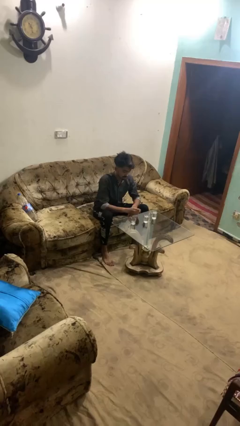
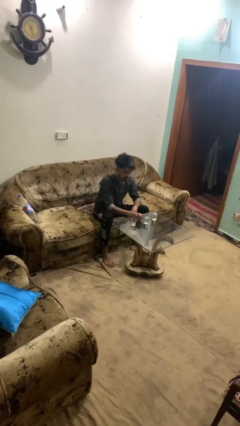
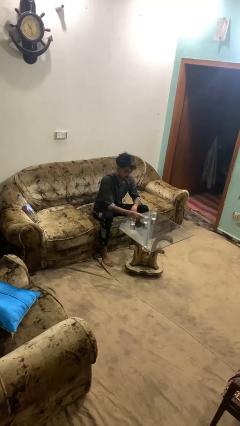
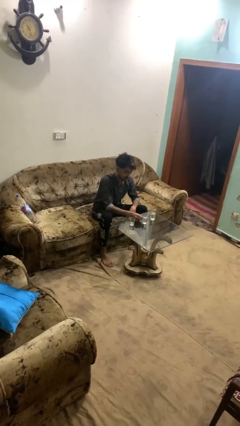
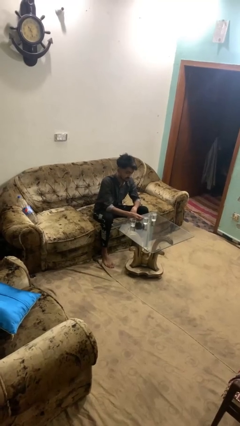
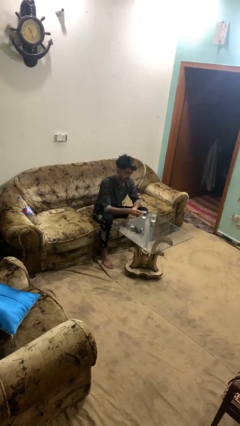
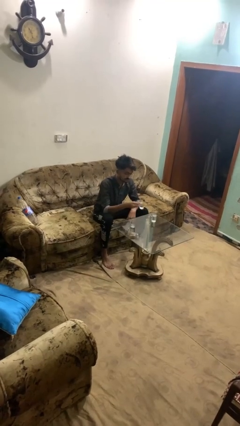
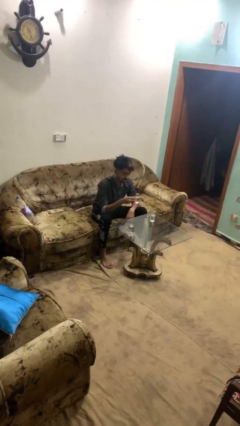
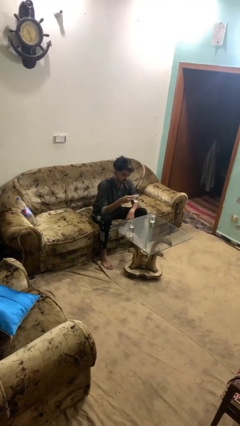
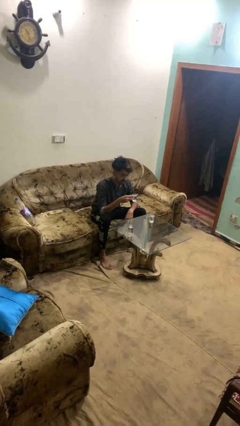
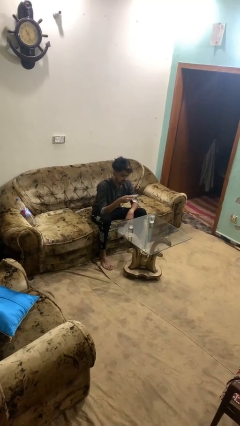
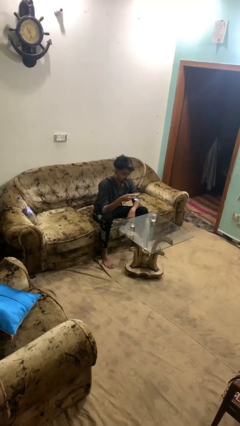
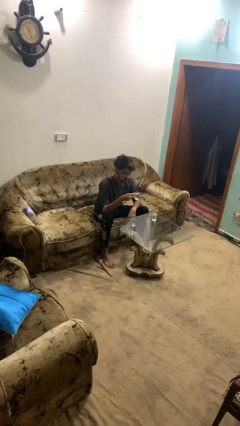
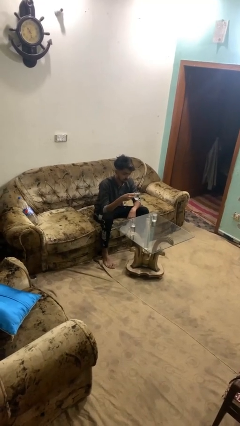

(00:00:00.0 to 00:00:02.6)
person picks up object from table

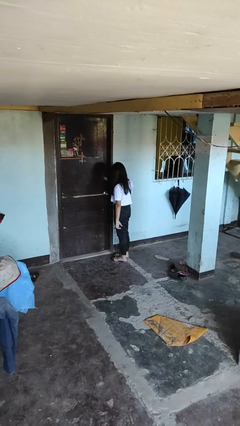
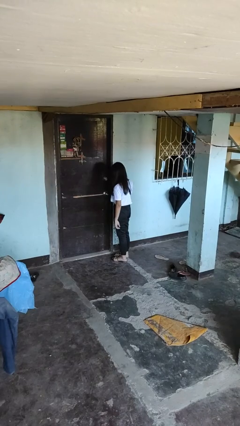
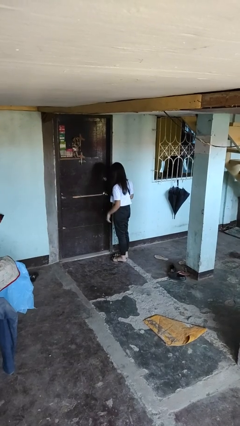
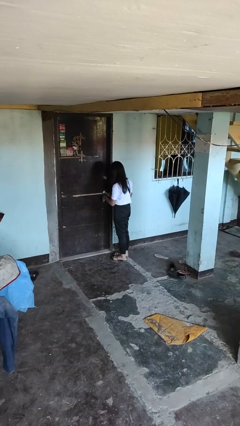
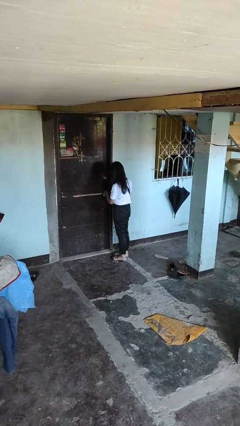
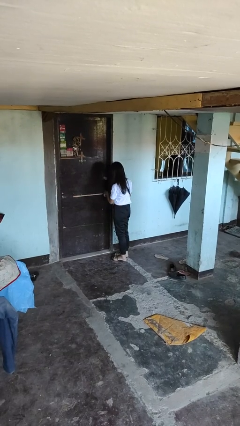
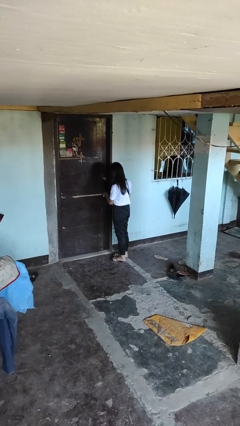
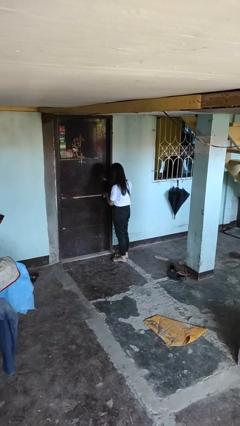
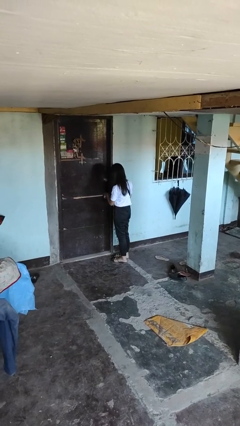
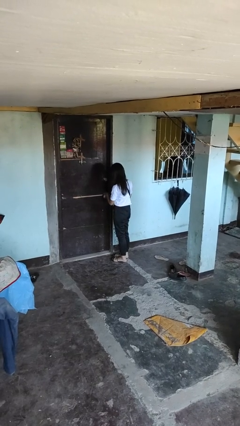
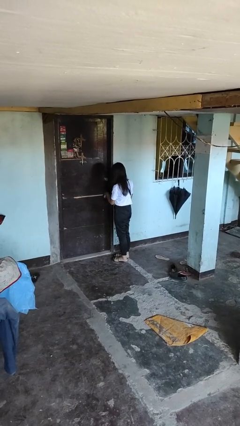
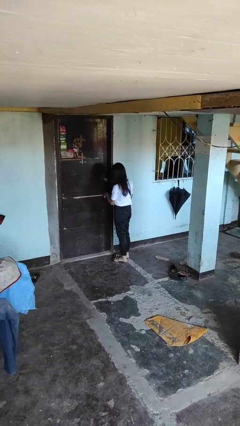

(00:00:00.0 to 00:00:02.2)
person unlocks door with keys

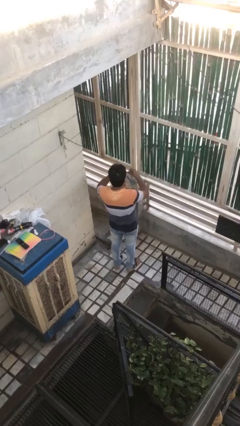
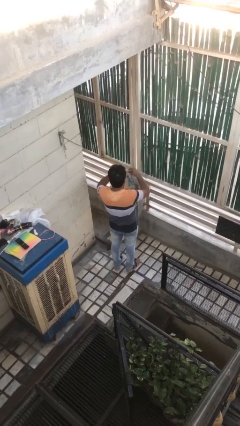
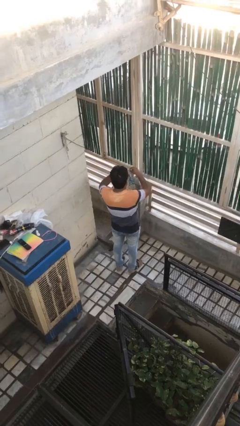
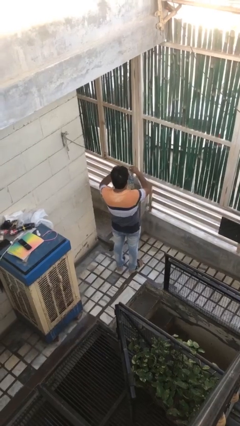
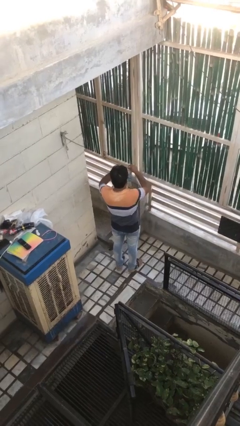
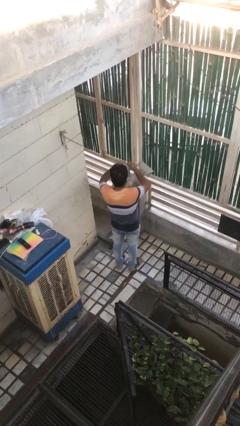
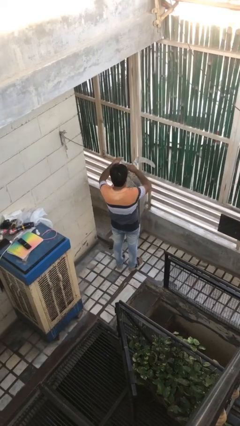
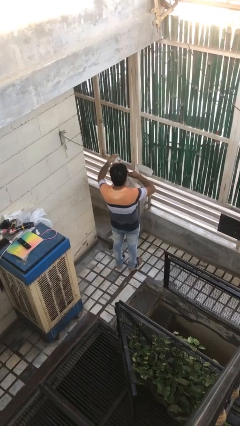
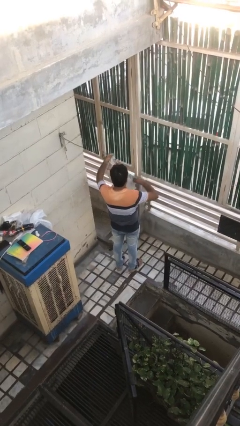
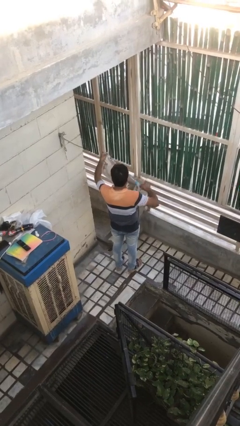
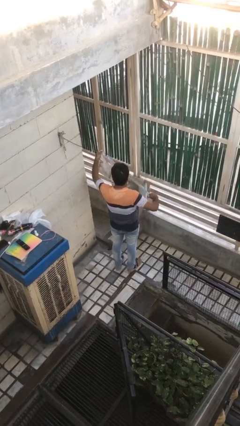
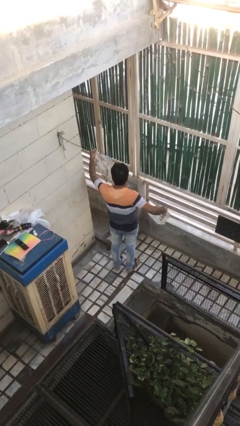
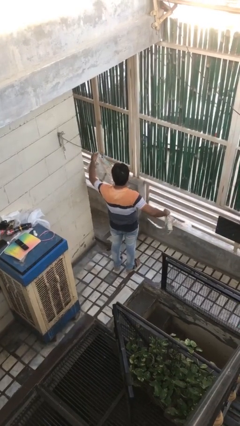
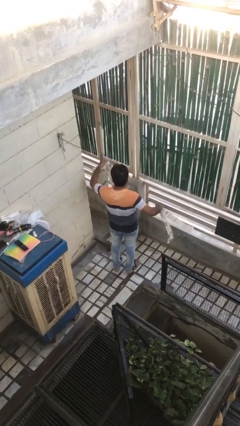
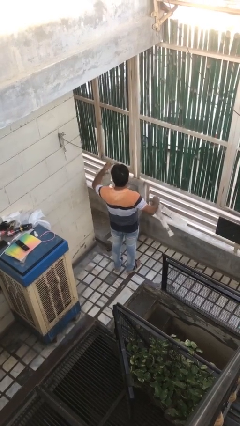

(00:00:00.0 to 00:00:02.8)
person tears paper

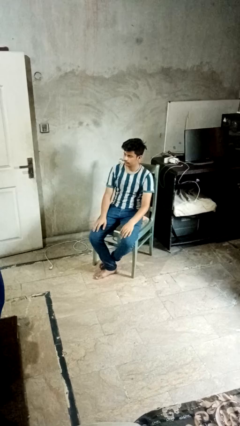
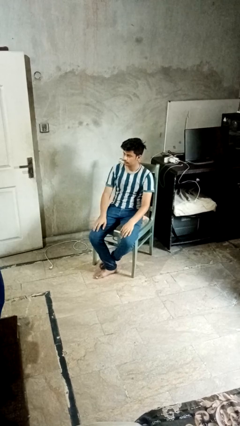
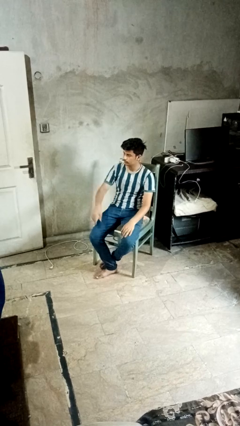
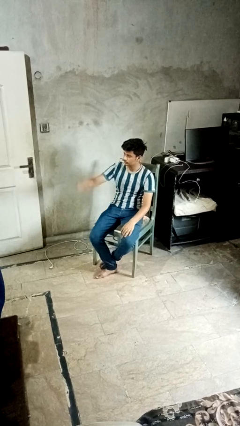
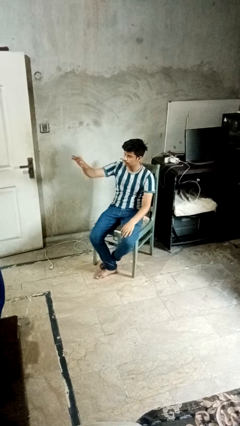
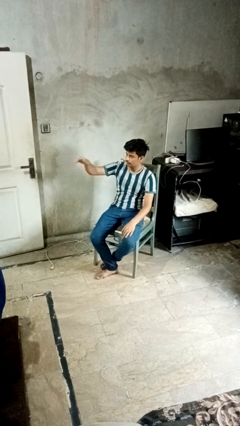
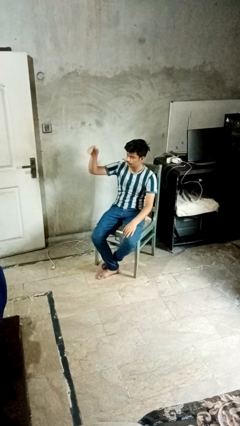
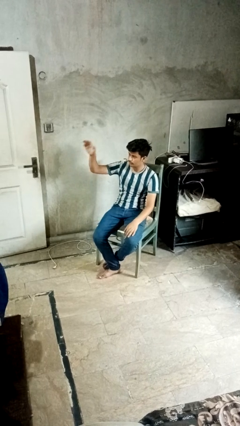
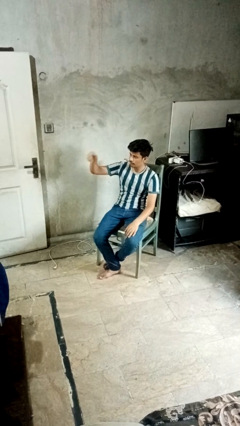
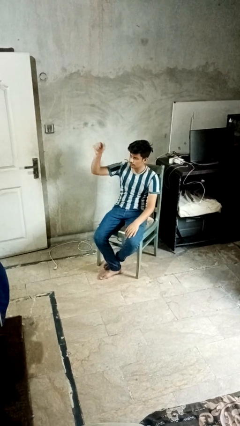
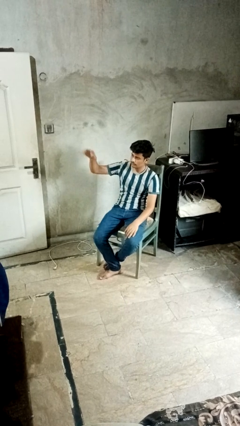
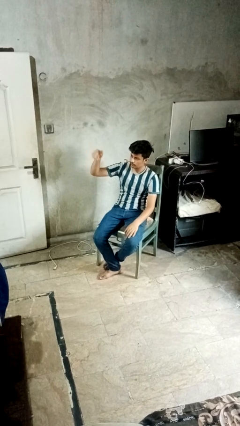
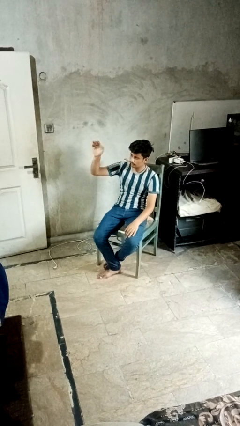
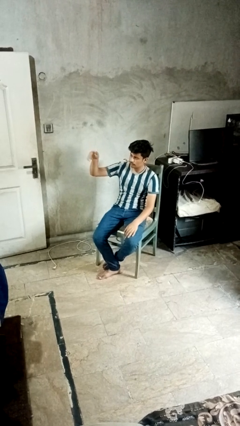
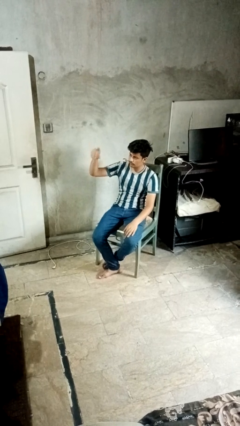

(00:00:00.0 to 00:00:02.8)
person gestures come here

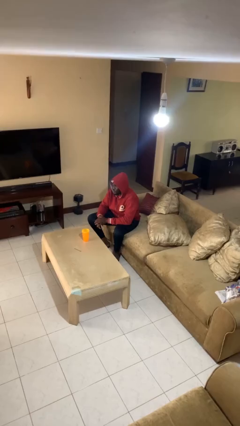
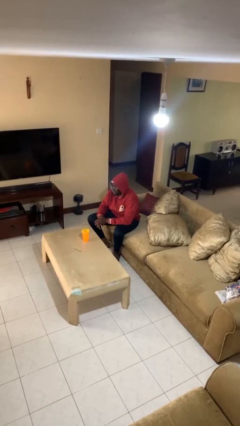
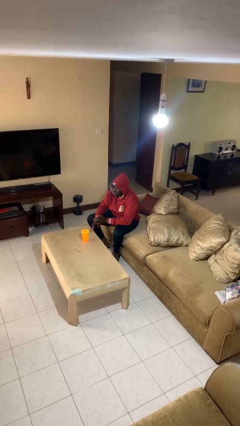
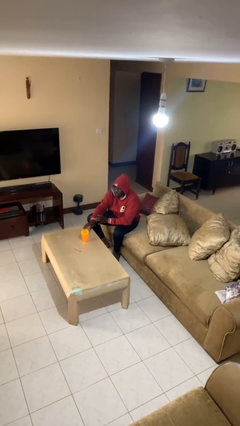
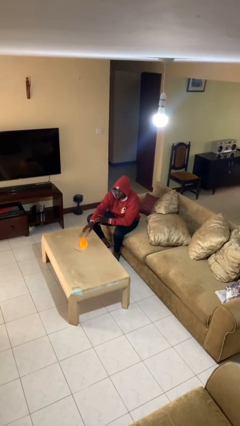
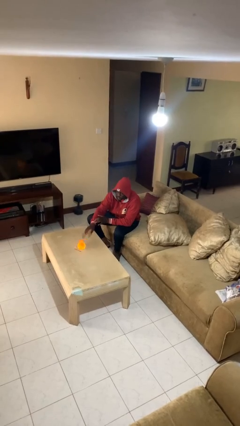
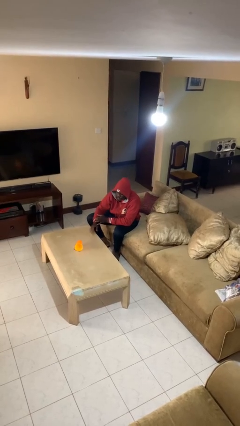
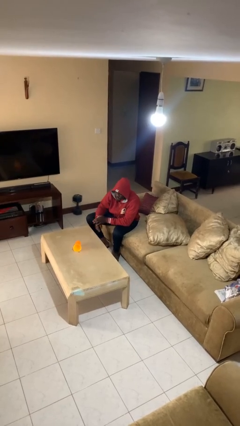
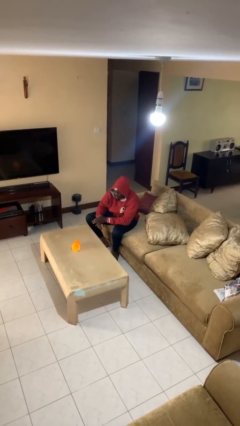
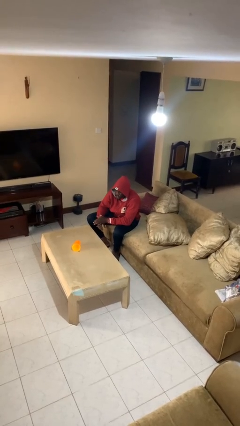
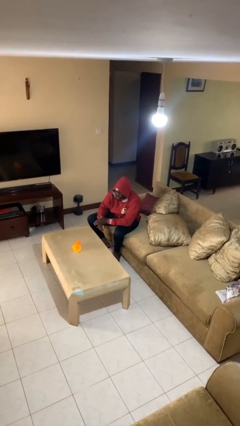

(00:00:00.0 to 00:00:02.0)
person knocks over glass

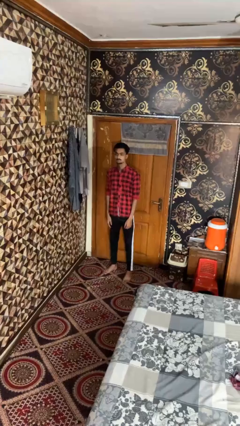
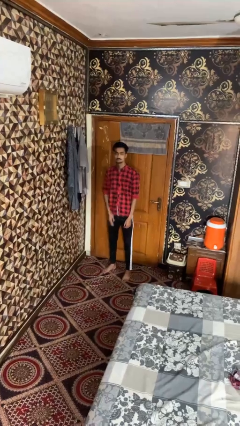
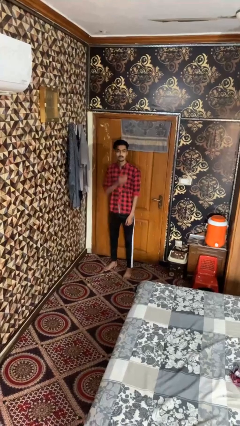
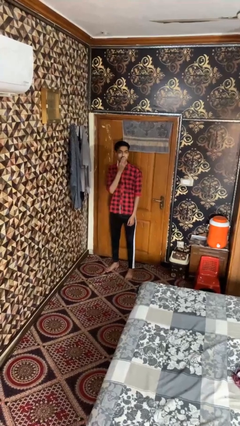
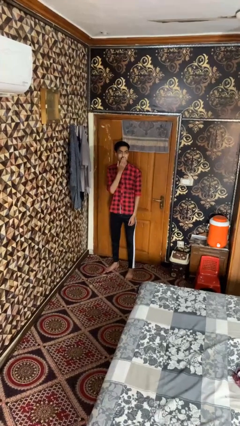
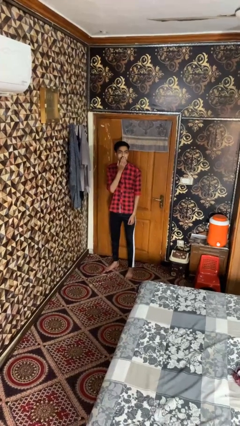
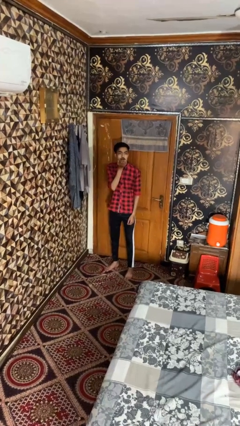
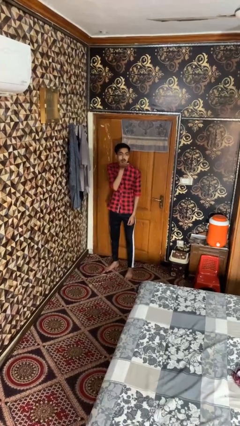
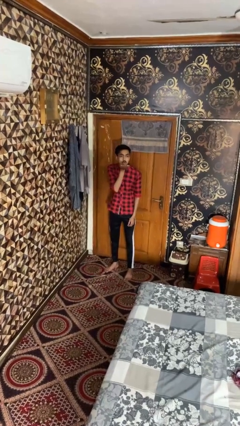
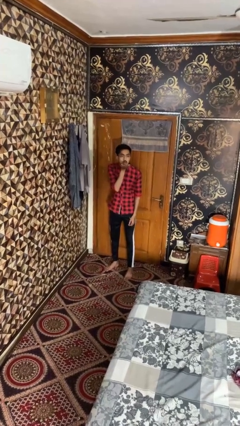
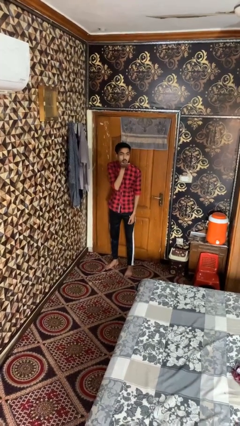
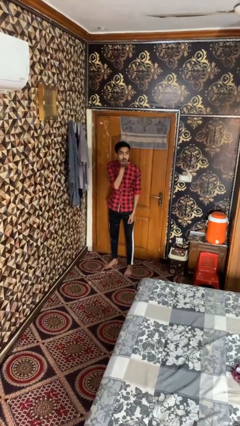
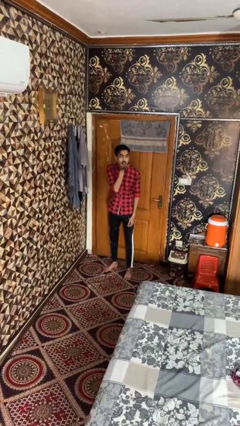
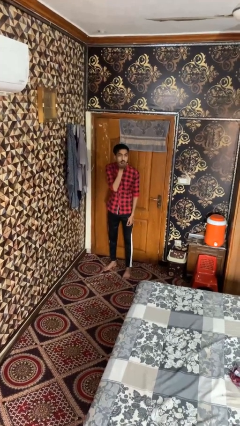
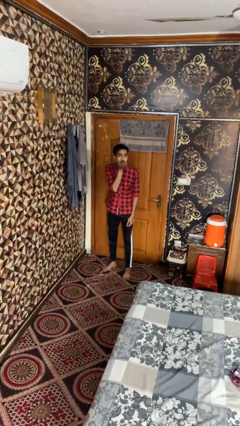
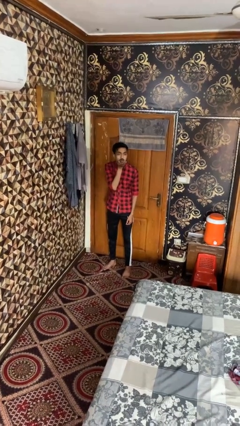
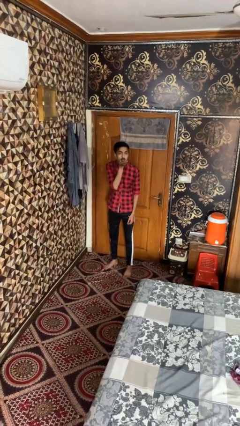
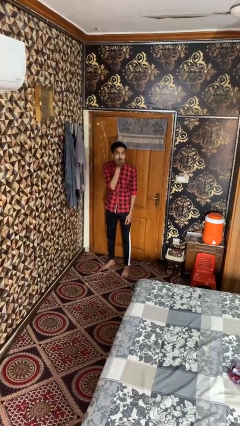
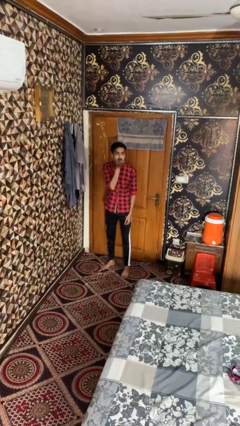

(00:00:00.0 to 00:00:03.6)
person gestures blow kiss

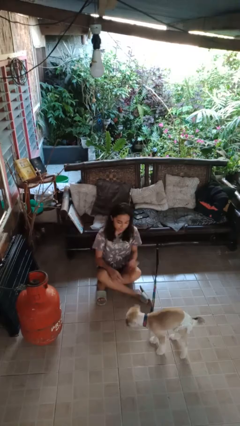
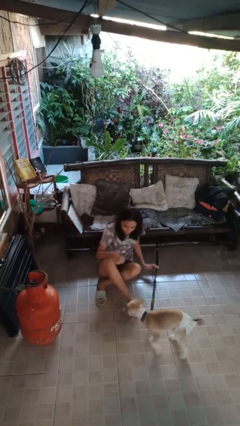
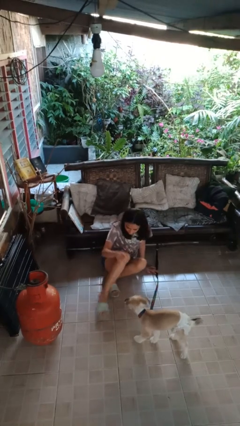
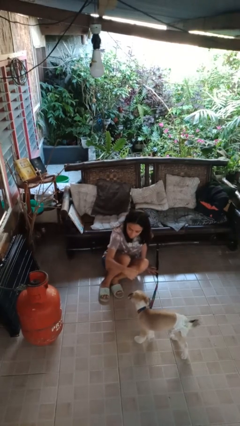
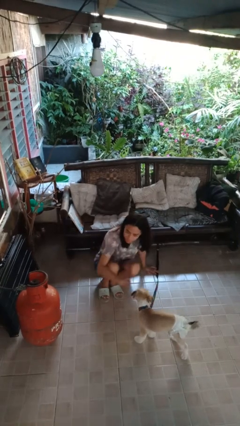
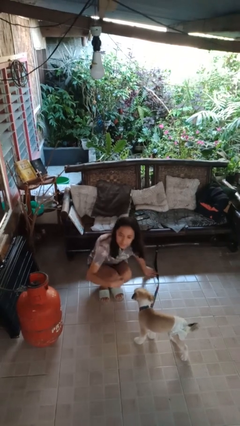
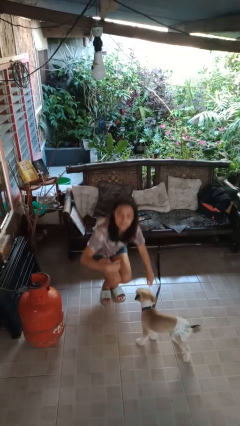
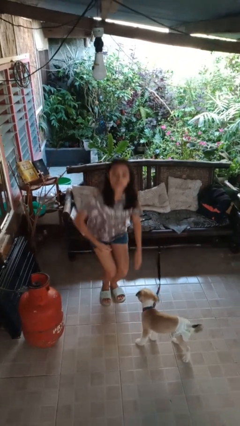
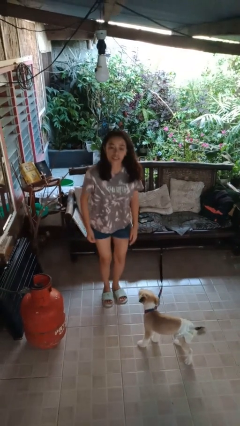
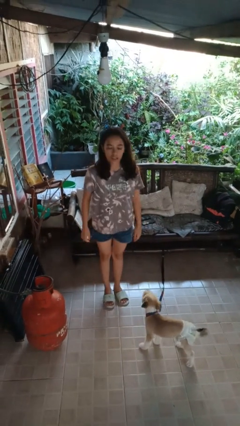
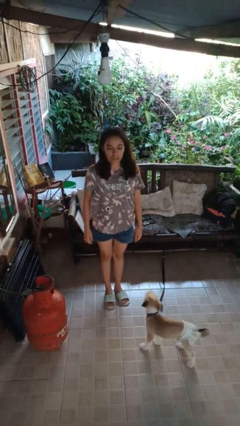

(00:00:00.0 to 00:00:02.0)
person stands up from floor
